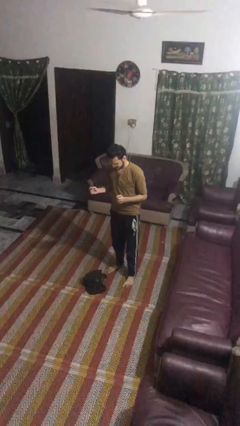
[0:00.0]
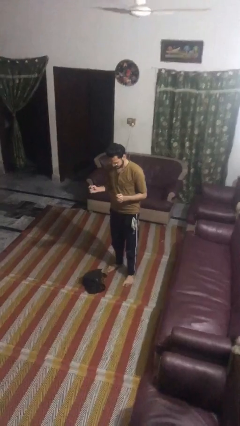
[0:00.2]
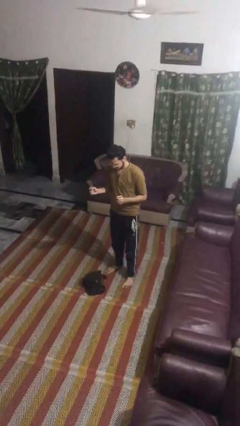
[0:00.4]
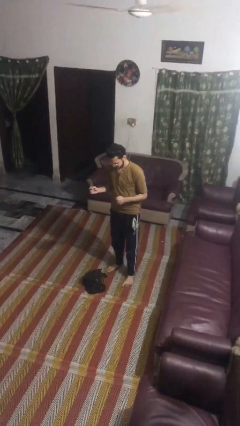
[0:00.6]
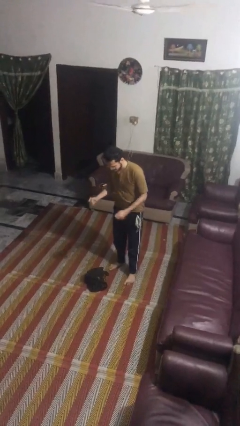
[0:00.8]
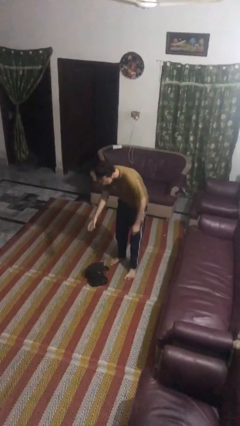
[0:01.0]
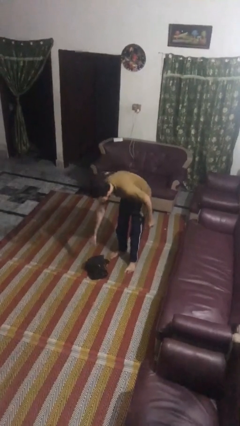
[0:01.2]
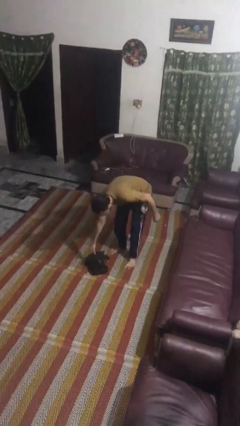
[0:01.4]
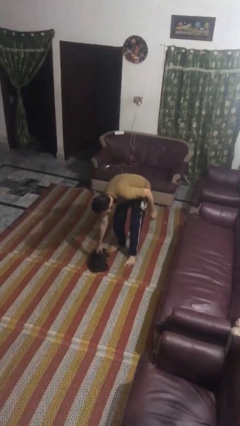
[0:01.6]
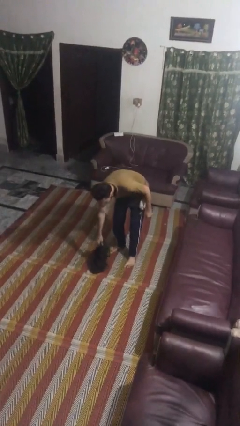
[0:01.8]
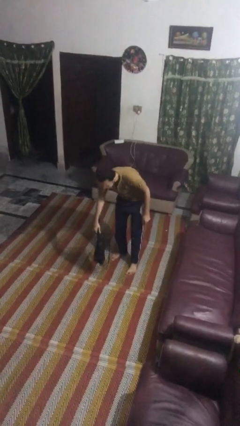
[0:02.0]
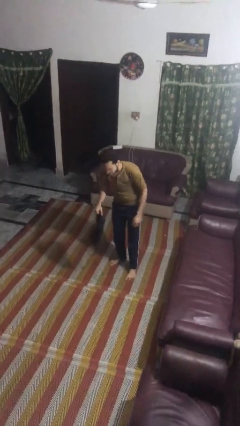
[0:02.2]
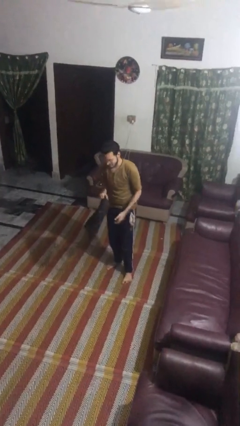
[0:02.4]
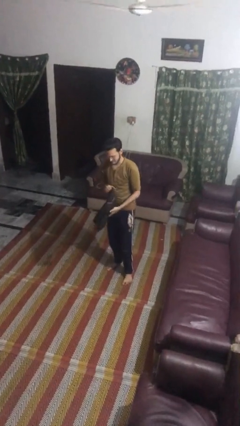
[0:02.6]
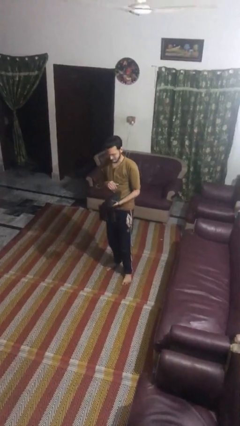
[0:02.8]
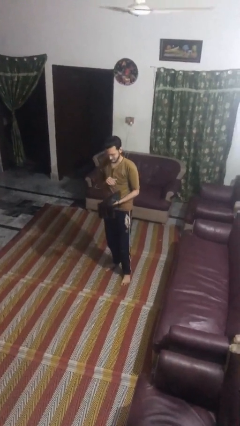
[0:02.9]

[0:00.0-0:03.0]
person picks up object from floor

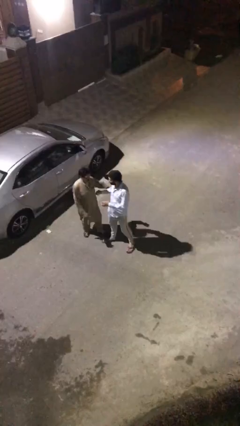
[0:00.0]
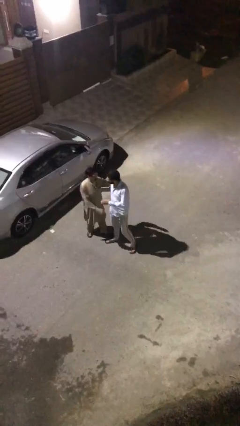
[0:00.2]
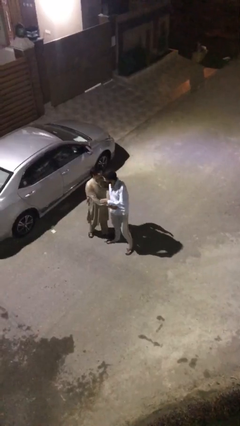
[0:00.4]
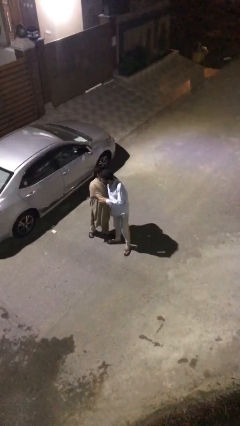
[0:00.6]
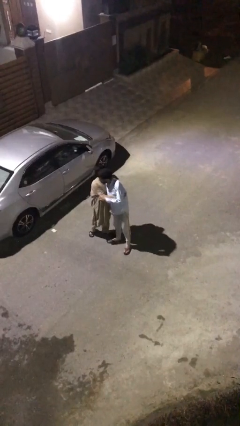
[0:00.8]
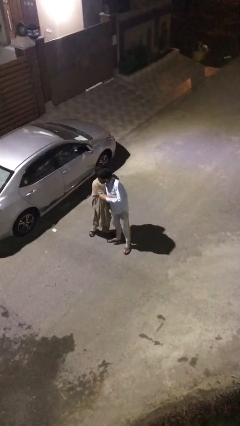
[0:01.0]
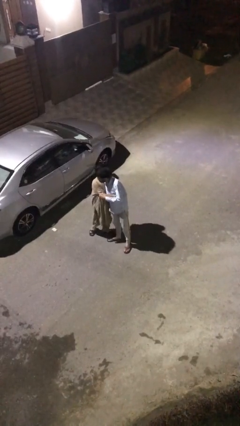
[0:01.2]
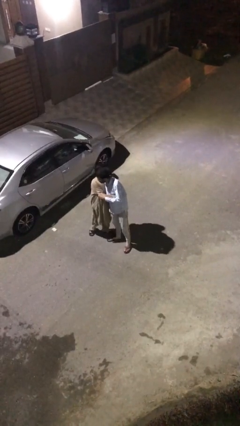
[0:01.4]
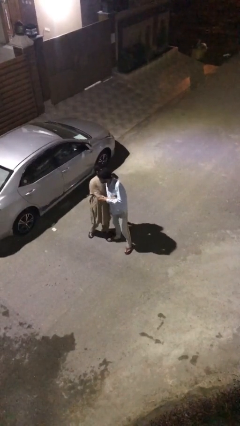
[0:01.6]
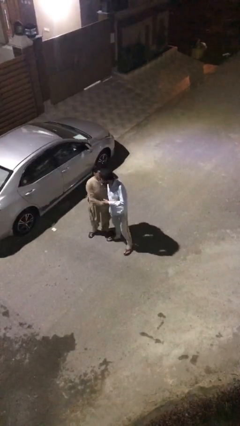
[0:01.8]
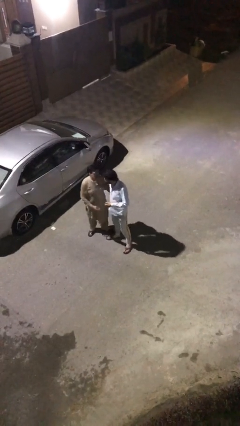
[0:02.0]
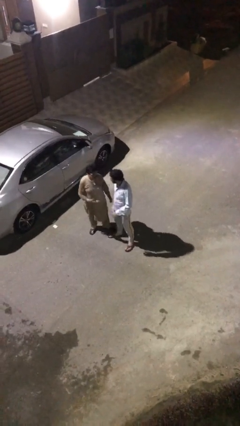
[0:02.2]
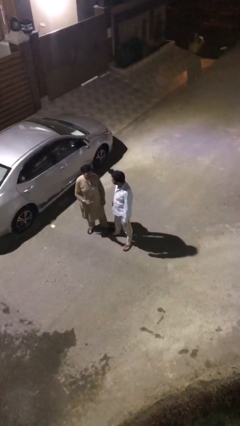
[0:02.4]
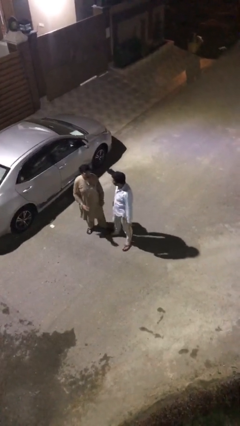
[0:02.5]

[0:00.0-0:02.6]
person embraces person

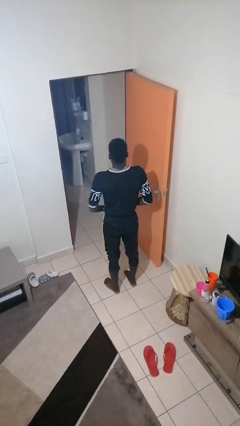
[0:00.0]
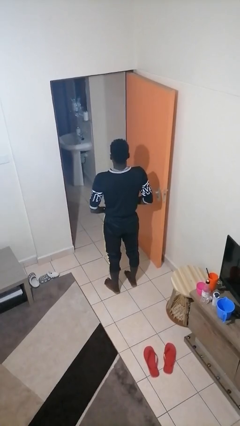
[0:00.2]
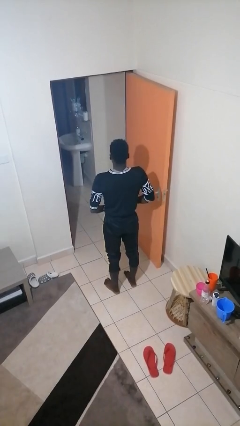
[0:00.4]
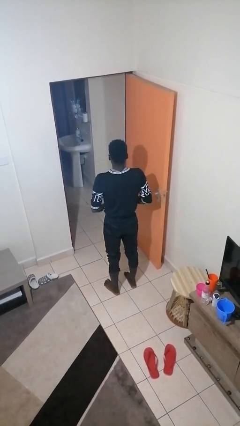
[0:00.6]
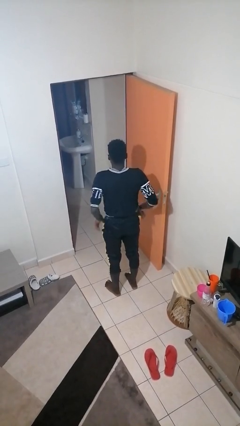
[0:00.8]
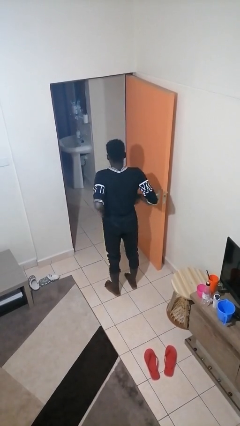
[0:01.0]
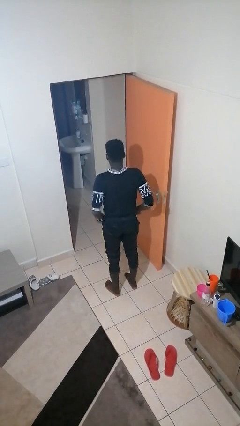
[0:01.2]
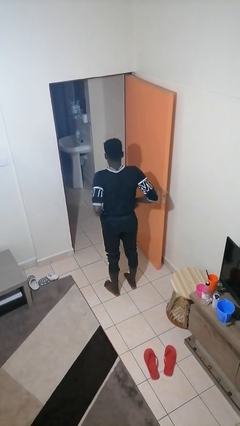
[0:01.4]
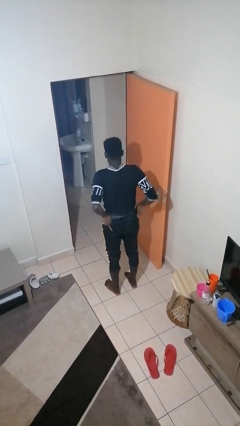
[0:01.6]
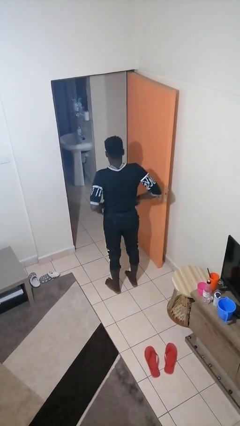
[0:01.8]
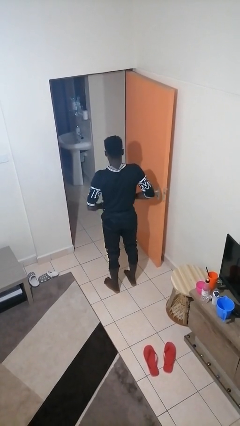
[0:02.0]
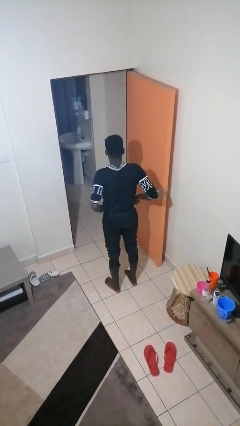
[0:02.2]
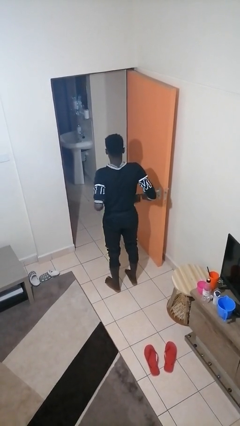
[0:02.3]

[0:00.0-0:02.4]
person hikes up pants

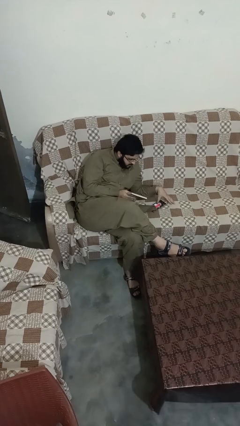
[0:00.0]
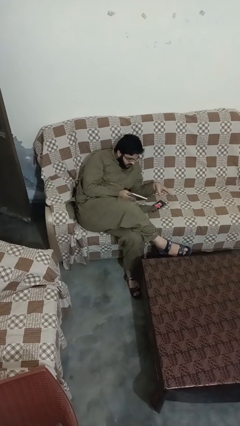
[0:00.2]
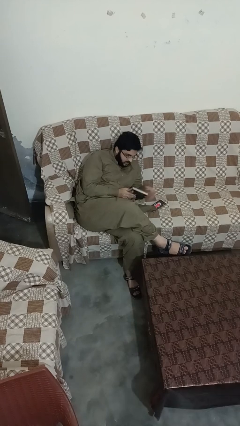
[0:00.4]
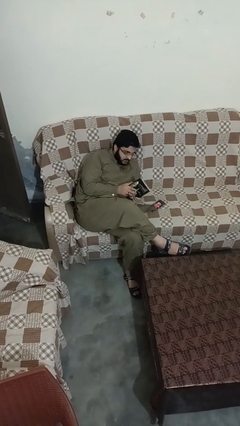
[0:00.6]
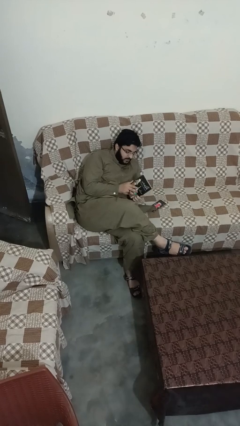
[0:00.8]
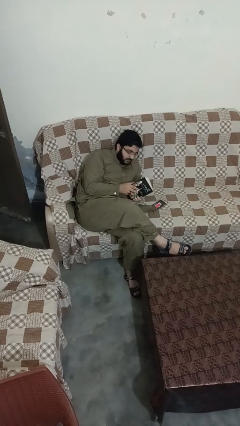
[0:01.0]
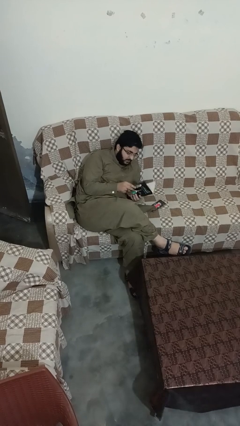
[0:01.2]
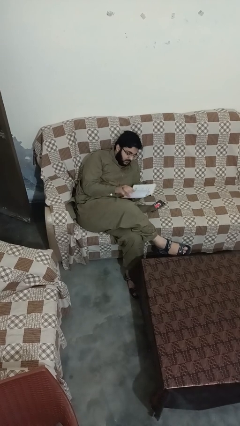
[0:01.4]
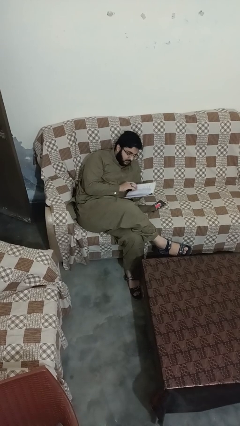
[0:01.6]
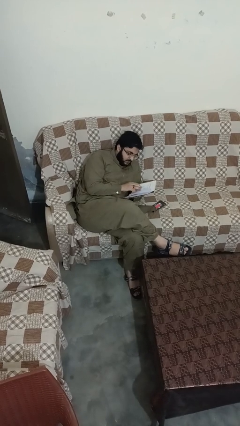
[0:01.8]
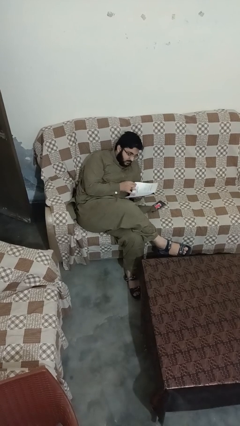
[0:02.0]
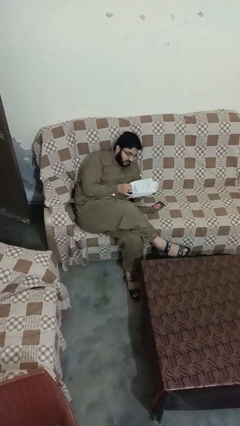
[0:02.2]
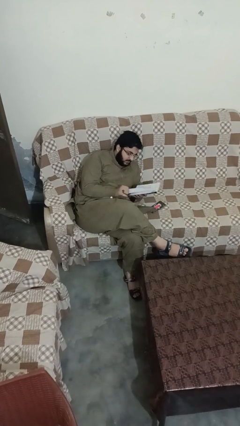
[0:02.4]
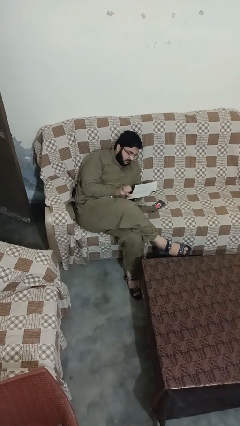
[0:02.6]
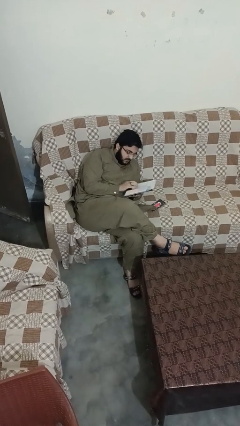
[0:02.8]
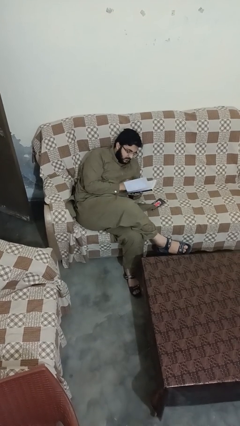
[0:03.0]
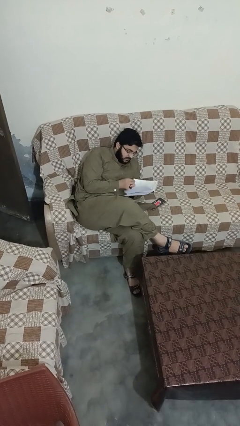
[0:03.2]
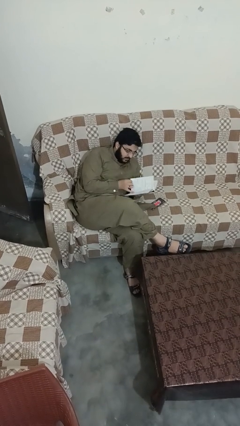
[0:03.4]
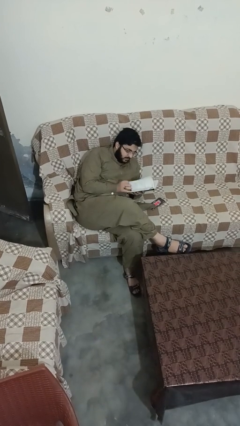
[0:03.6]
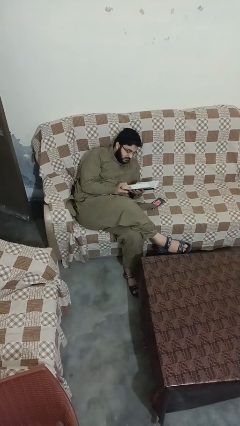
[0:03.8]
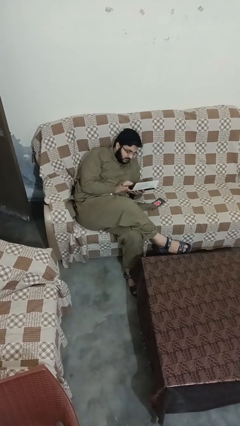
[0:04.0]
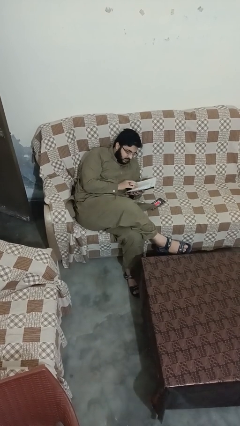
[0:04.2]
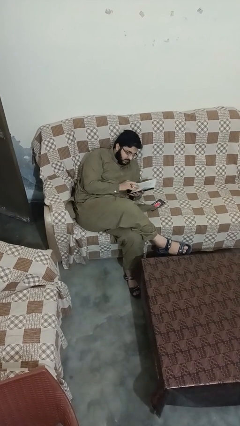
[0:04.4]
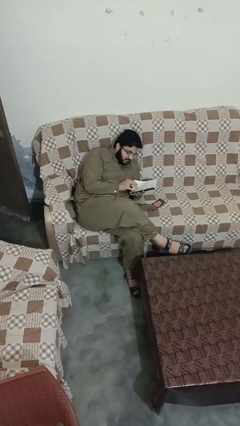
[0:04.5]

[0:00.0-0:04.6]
person reads book

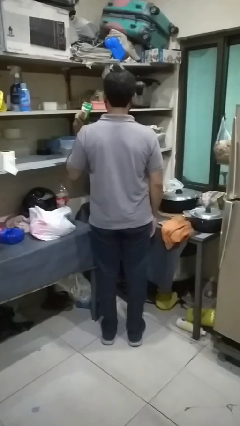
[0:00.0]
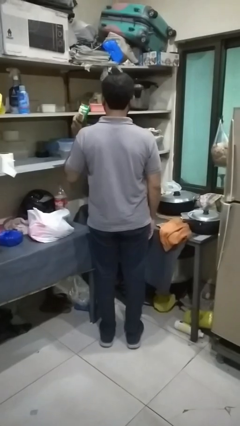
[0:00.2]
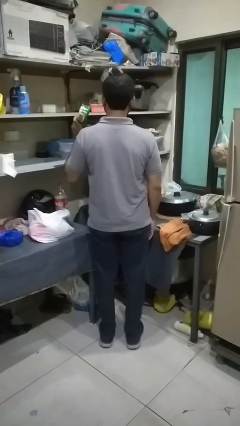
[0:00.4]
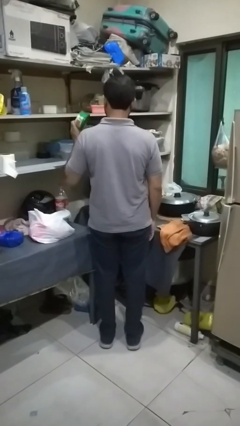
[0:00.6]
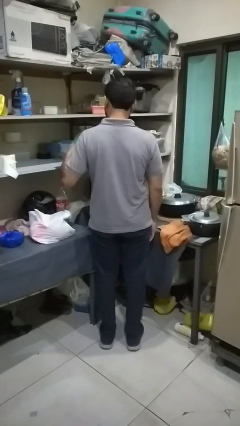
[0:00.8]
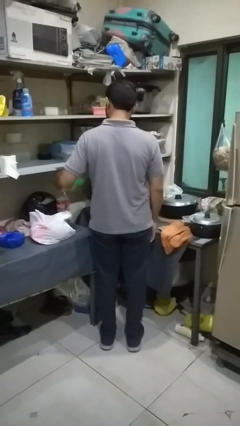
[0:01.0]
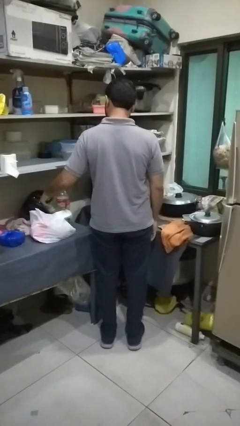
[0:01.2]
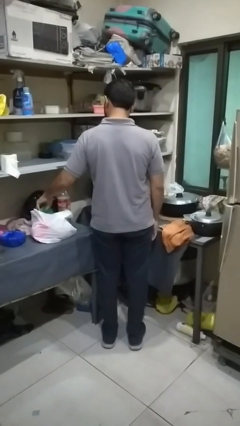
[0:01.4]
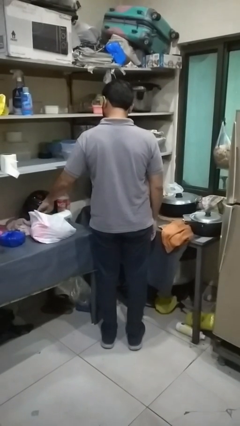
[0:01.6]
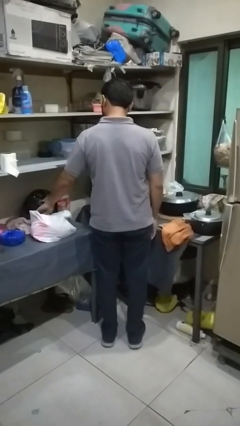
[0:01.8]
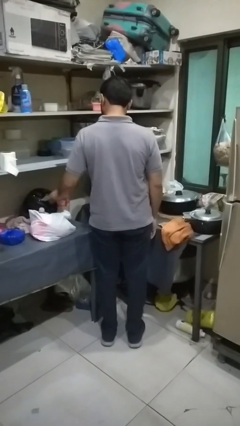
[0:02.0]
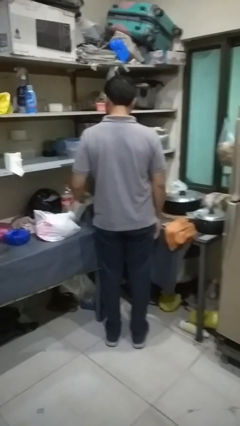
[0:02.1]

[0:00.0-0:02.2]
person puts object into bag

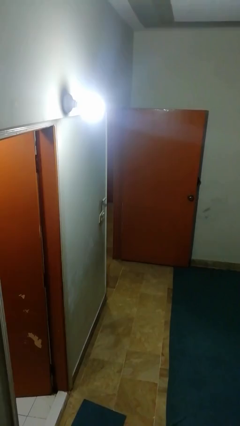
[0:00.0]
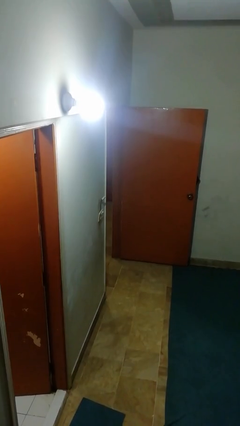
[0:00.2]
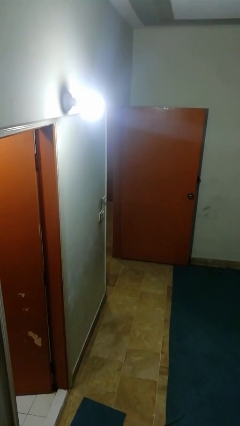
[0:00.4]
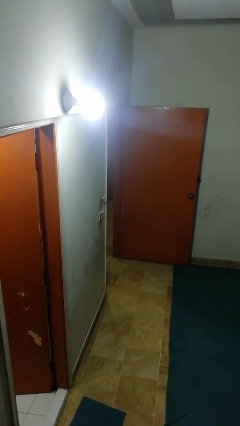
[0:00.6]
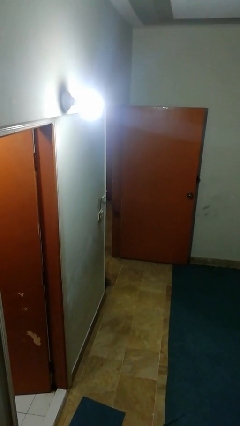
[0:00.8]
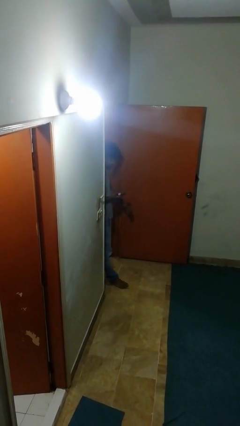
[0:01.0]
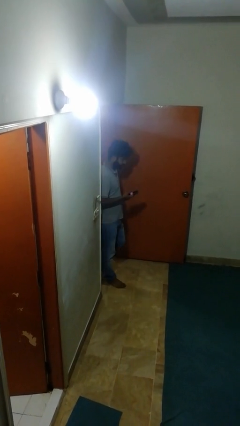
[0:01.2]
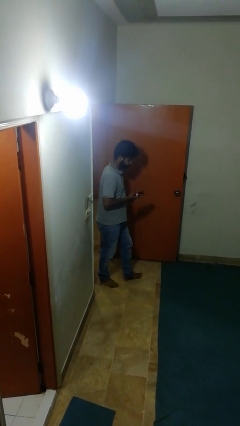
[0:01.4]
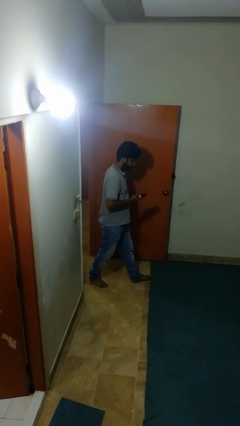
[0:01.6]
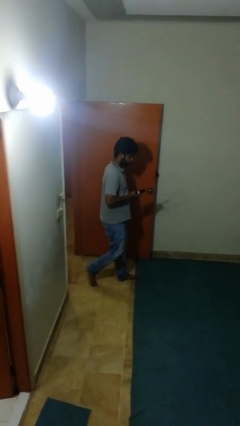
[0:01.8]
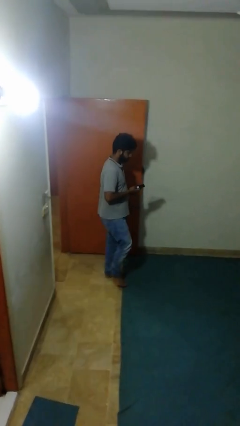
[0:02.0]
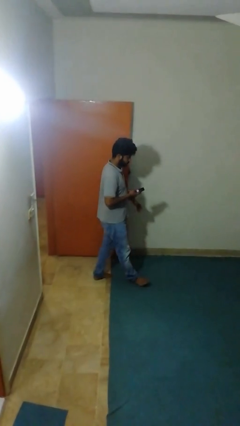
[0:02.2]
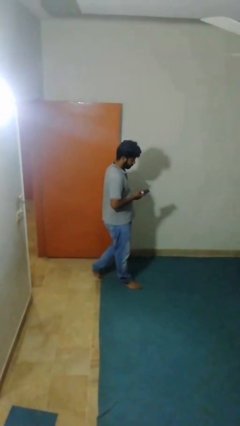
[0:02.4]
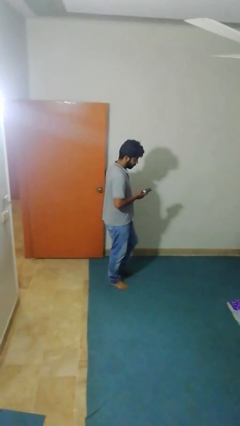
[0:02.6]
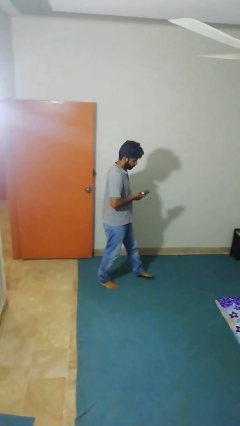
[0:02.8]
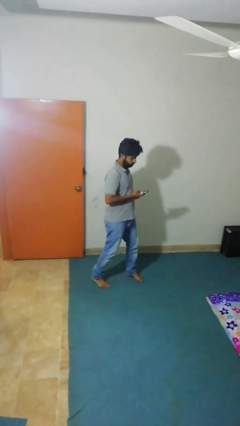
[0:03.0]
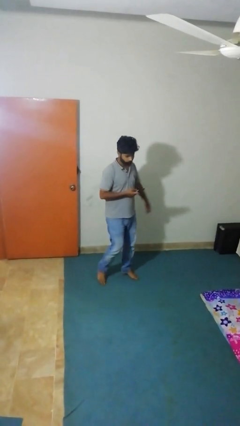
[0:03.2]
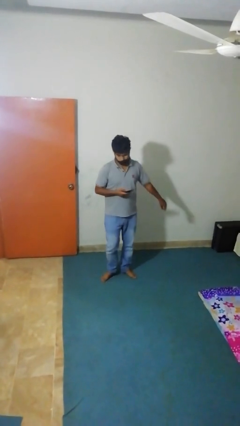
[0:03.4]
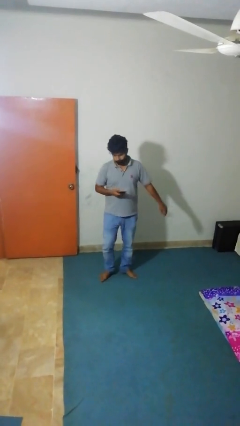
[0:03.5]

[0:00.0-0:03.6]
person enters scene through structure
